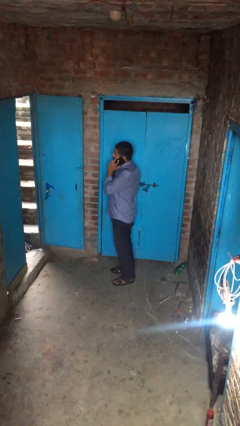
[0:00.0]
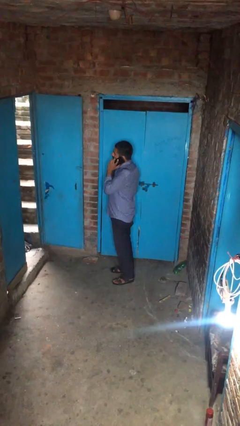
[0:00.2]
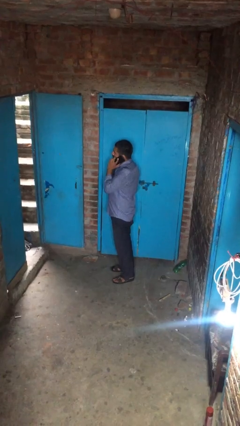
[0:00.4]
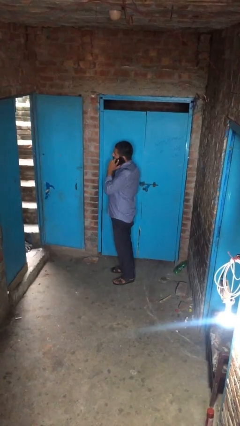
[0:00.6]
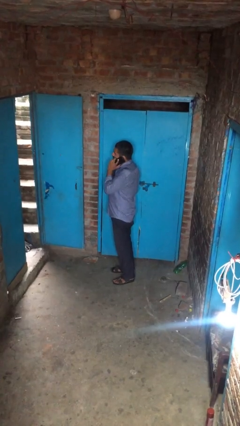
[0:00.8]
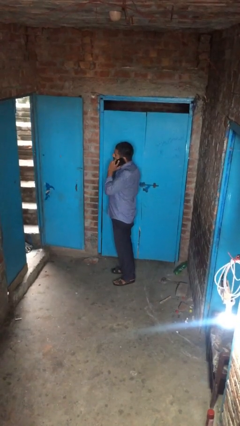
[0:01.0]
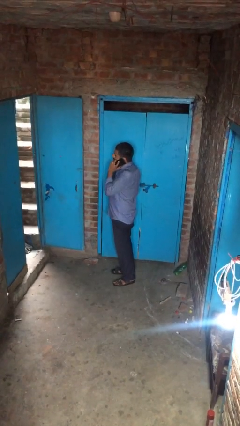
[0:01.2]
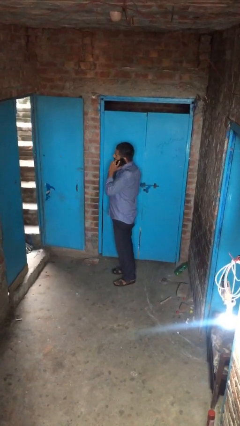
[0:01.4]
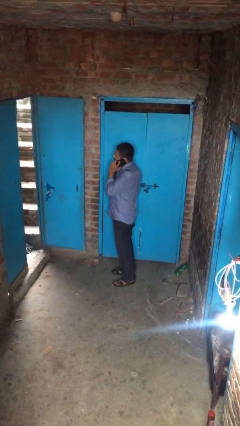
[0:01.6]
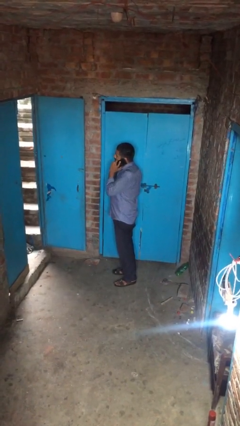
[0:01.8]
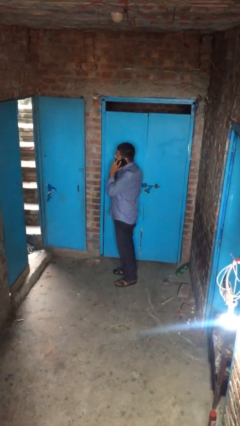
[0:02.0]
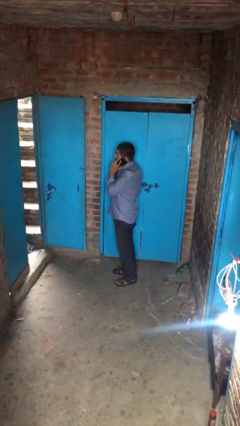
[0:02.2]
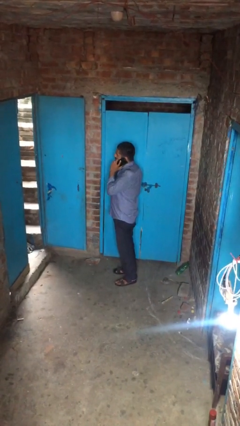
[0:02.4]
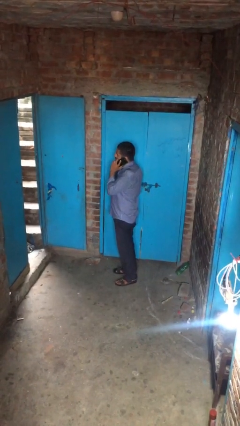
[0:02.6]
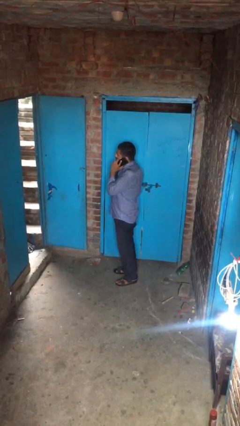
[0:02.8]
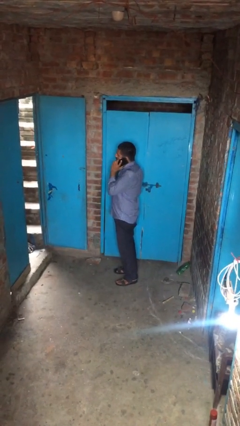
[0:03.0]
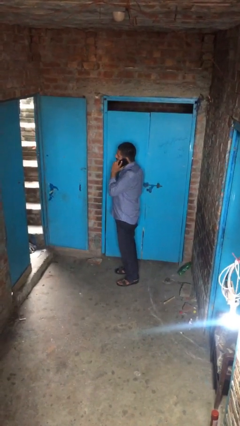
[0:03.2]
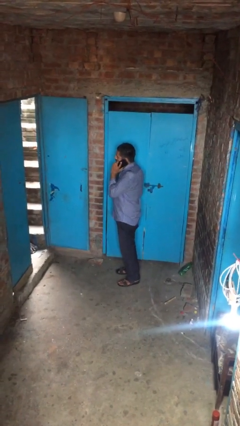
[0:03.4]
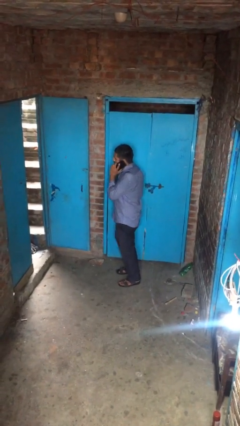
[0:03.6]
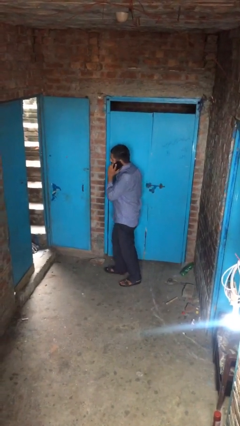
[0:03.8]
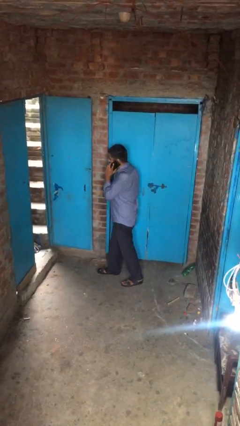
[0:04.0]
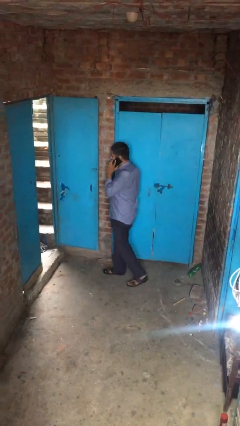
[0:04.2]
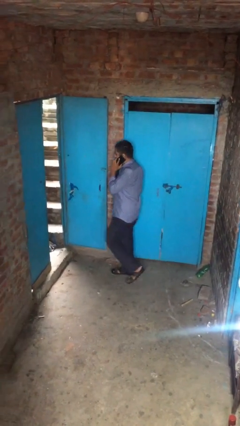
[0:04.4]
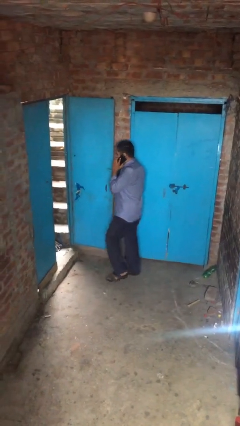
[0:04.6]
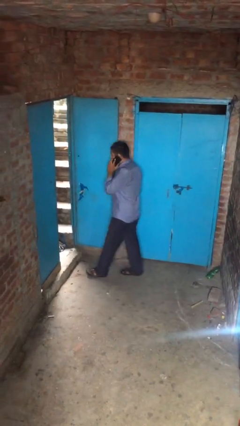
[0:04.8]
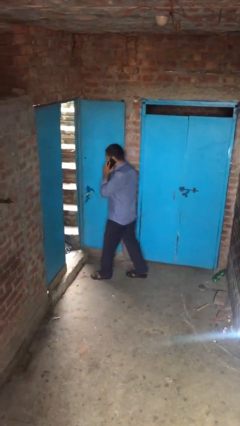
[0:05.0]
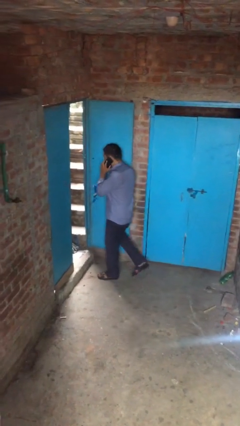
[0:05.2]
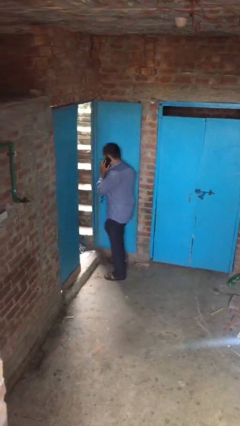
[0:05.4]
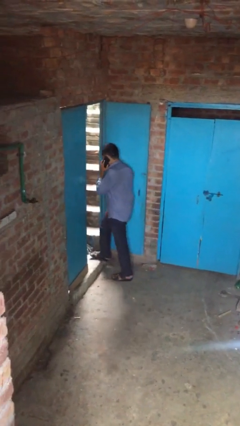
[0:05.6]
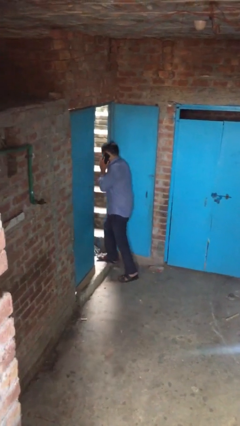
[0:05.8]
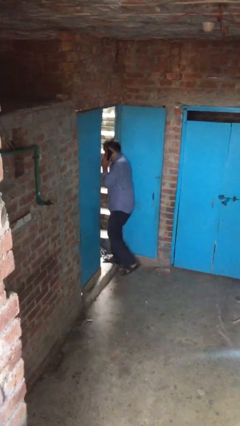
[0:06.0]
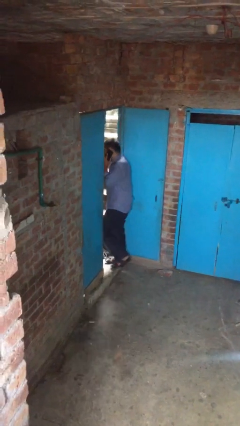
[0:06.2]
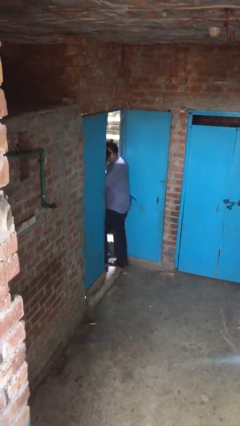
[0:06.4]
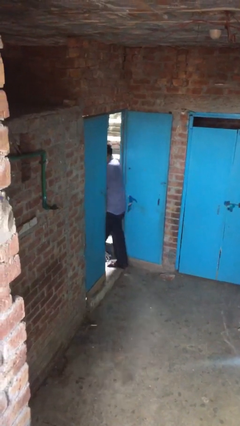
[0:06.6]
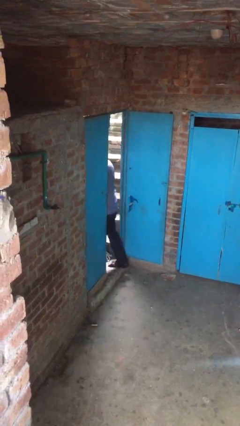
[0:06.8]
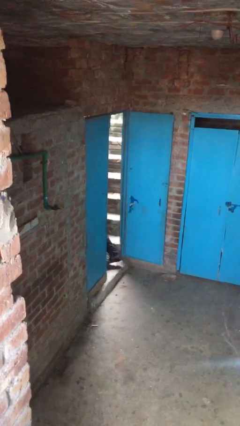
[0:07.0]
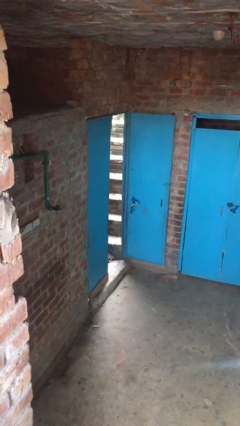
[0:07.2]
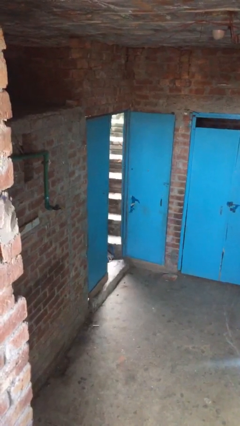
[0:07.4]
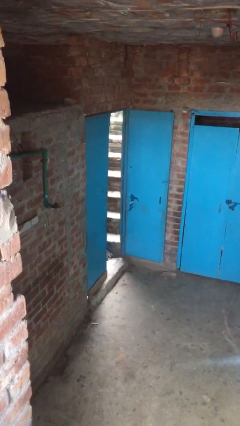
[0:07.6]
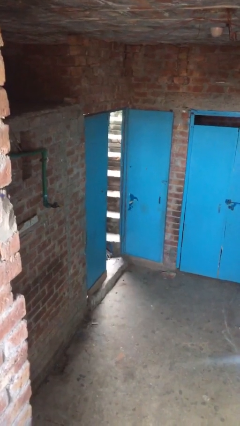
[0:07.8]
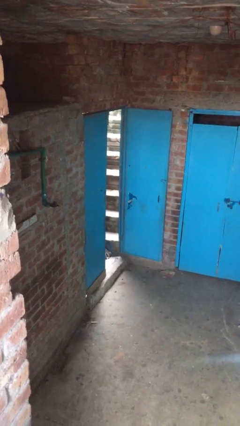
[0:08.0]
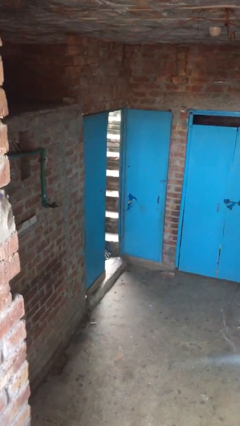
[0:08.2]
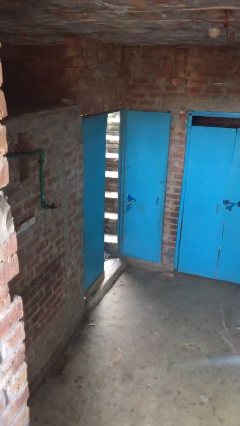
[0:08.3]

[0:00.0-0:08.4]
person exits scene through structure

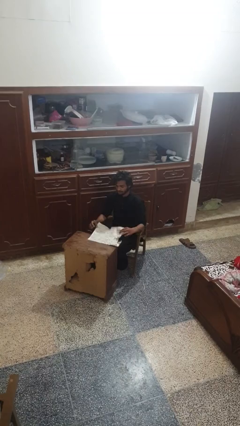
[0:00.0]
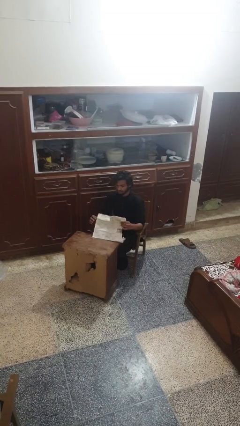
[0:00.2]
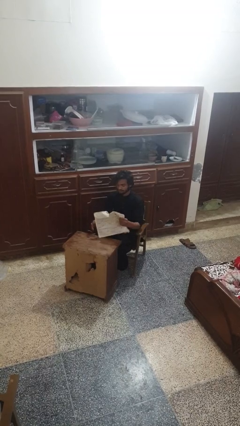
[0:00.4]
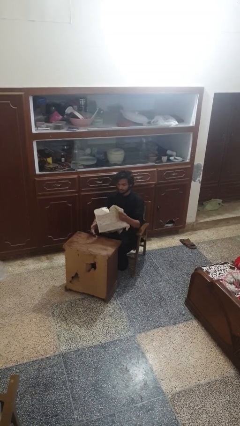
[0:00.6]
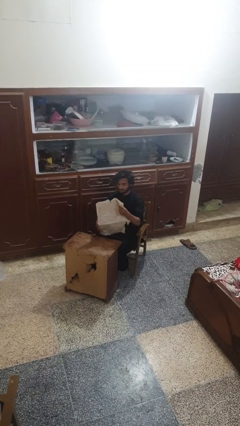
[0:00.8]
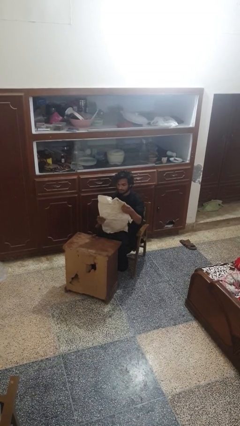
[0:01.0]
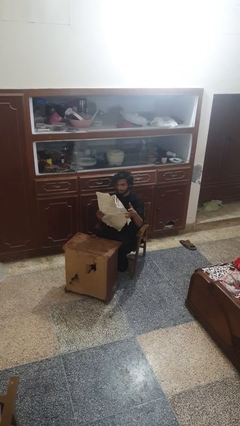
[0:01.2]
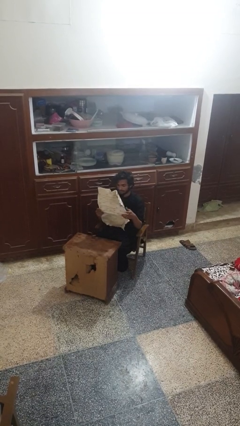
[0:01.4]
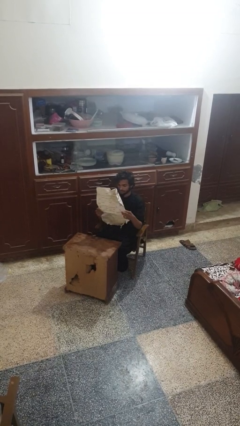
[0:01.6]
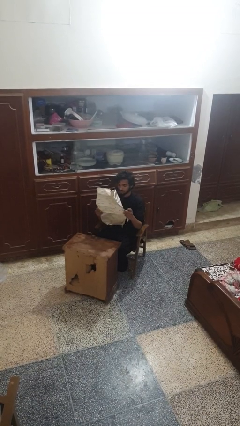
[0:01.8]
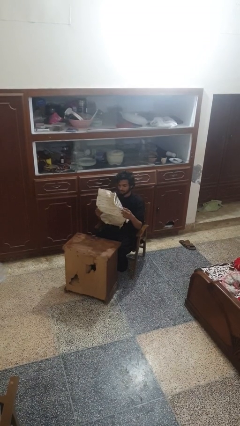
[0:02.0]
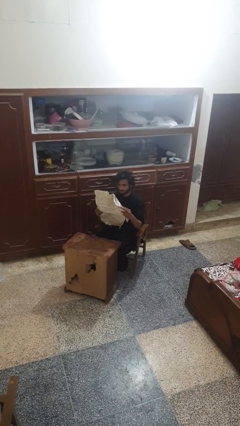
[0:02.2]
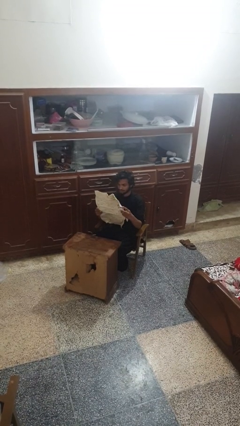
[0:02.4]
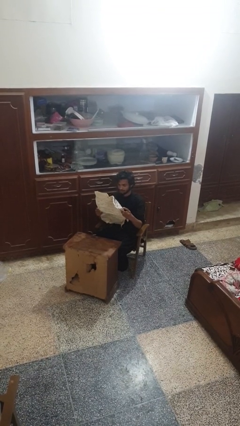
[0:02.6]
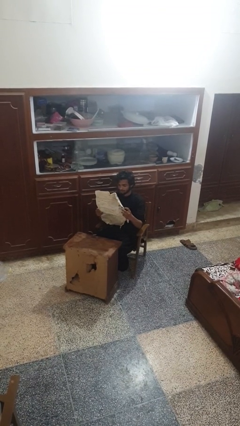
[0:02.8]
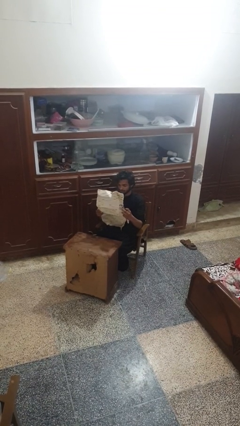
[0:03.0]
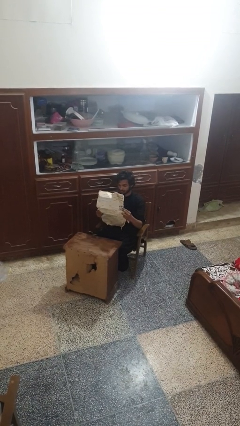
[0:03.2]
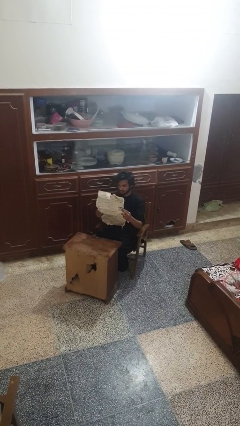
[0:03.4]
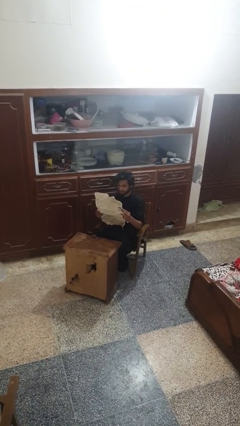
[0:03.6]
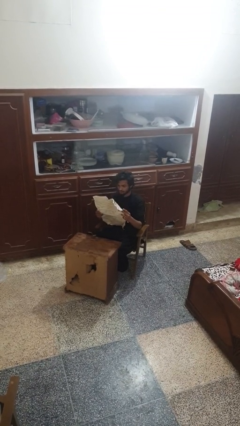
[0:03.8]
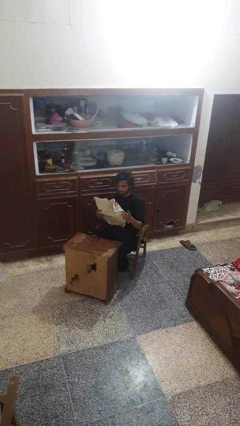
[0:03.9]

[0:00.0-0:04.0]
person reads newspaper

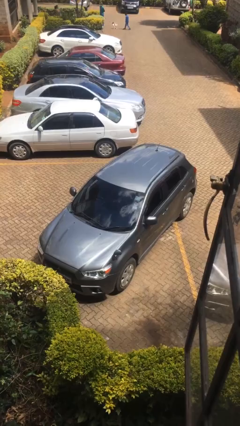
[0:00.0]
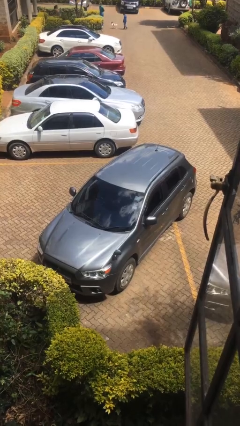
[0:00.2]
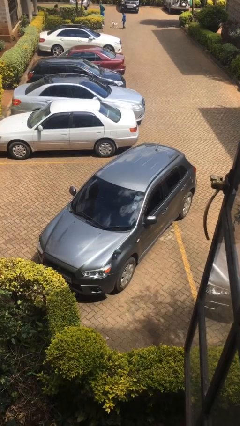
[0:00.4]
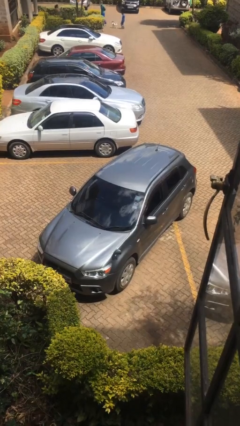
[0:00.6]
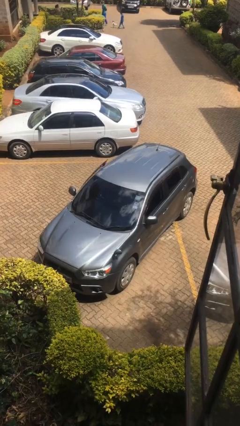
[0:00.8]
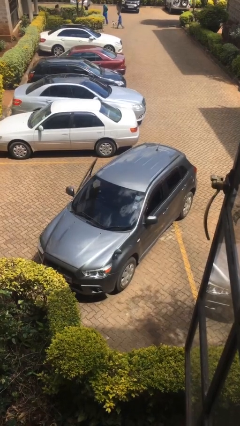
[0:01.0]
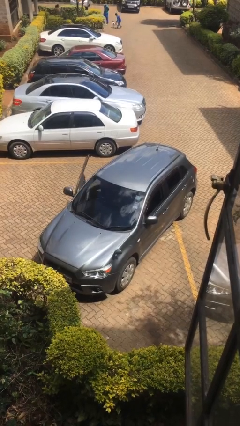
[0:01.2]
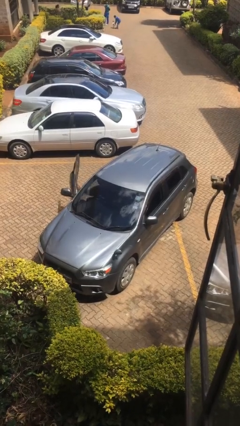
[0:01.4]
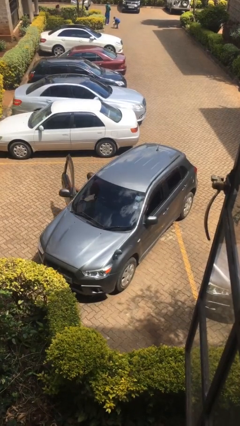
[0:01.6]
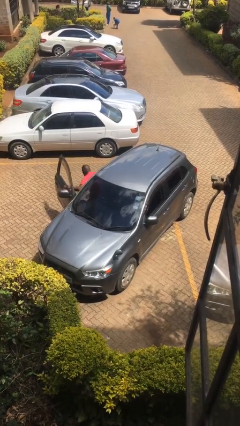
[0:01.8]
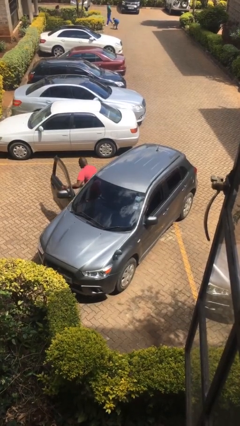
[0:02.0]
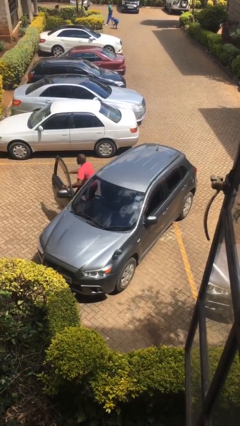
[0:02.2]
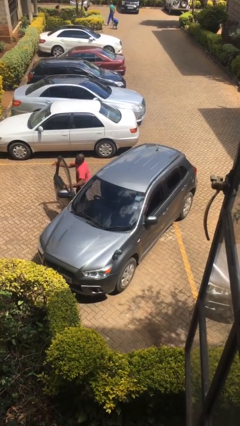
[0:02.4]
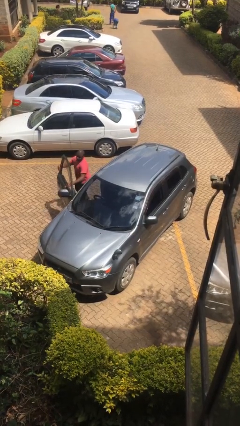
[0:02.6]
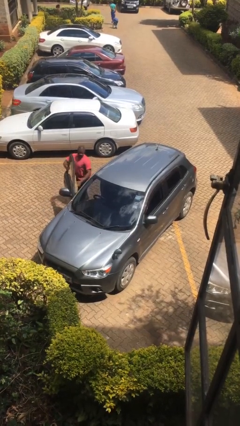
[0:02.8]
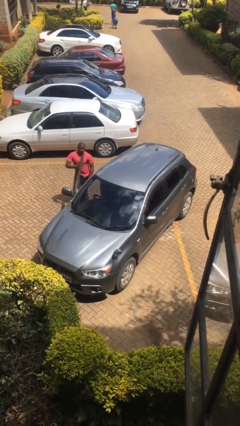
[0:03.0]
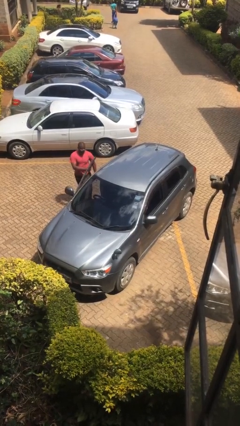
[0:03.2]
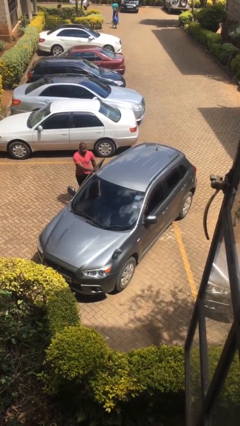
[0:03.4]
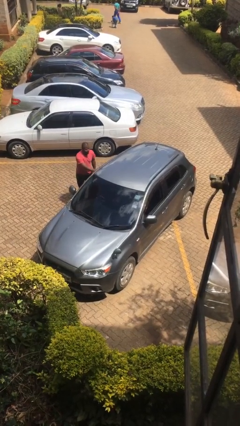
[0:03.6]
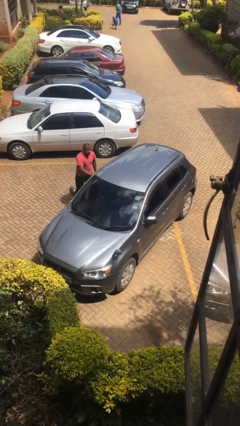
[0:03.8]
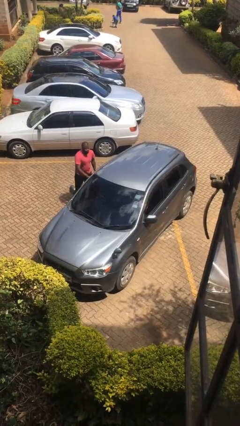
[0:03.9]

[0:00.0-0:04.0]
car drops off person

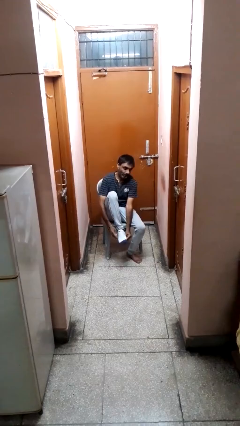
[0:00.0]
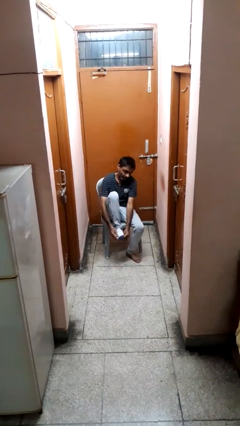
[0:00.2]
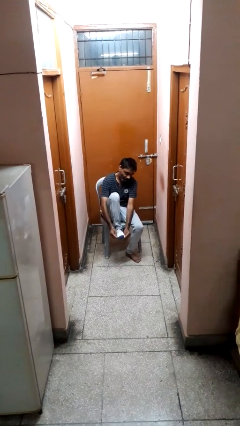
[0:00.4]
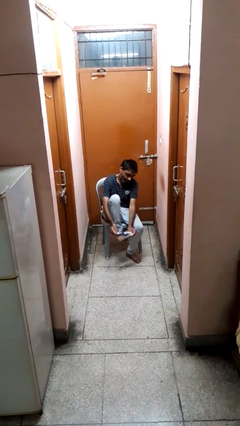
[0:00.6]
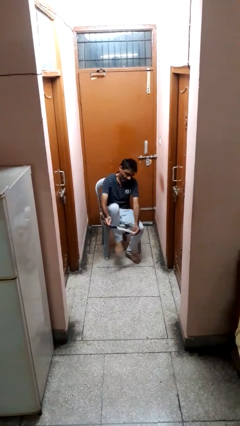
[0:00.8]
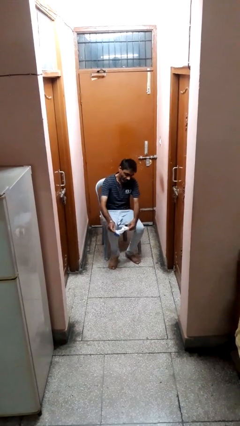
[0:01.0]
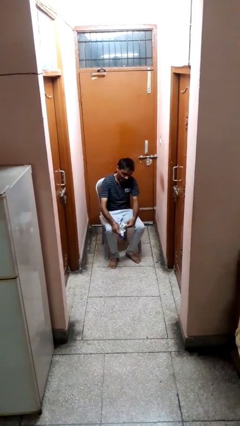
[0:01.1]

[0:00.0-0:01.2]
person takes off socks

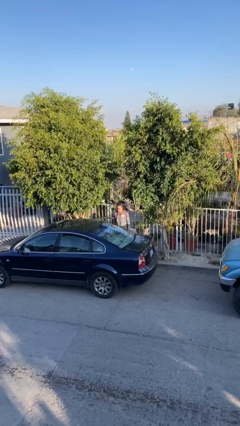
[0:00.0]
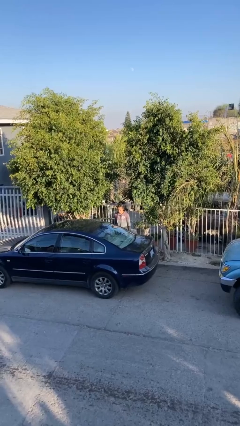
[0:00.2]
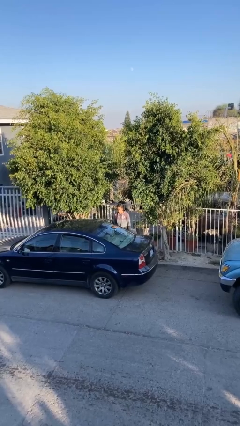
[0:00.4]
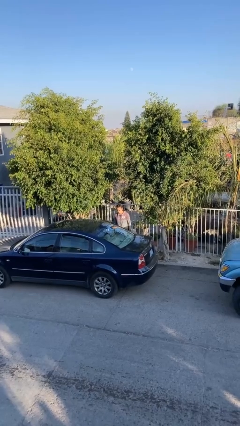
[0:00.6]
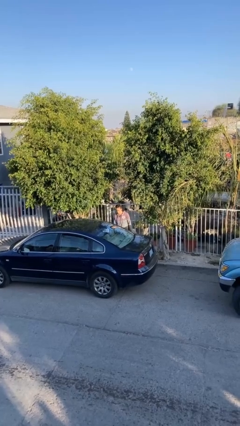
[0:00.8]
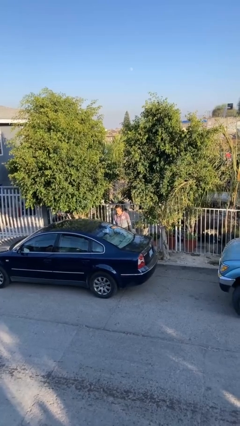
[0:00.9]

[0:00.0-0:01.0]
person closes car door
